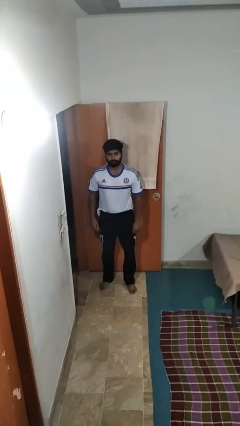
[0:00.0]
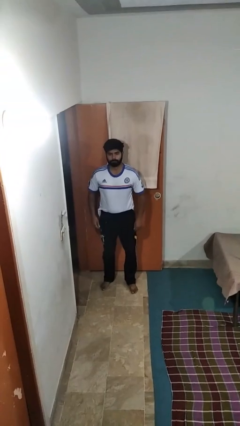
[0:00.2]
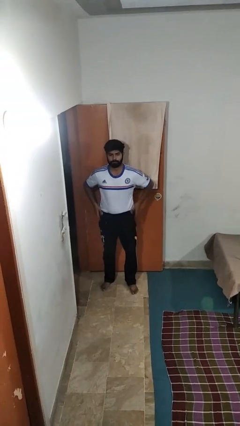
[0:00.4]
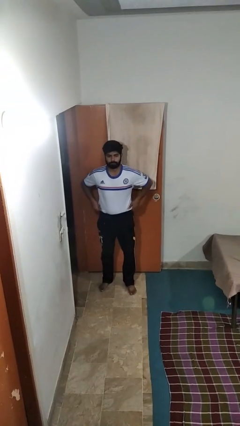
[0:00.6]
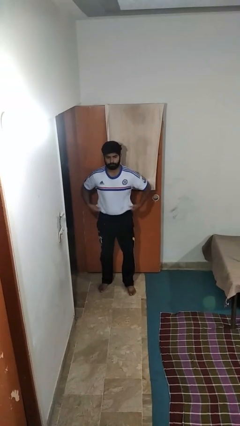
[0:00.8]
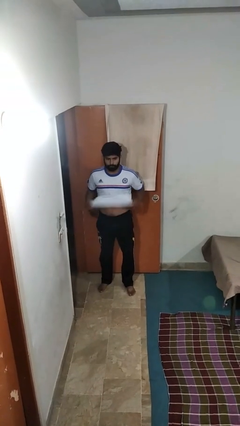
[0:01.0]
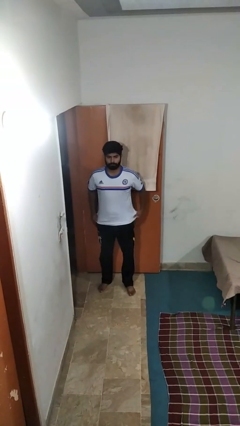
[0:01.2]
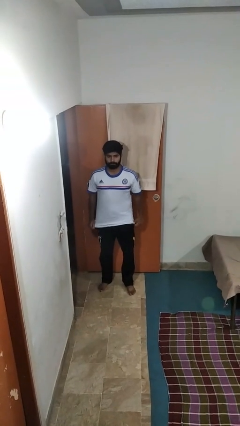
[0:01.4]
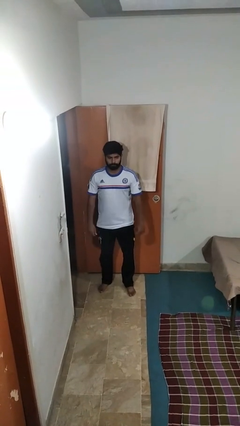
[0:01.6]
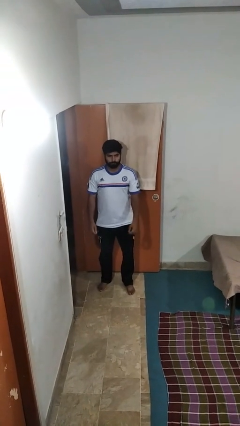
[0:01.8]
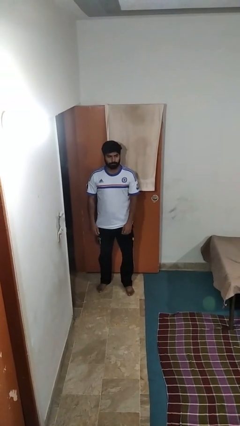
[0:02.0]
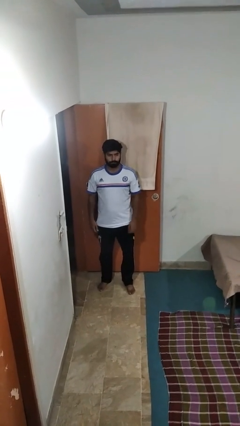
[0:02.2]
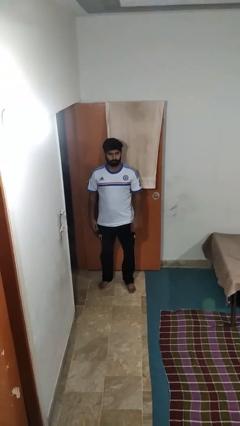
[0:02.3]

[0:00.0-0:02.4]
person untucks shirt

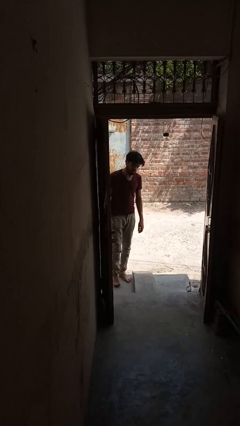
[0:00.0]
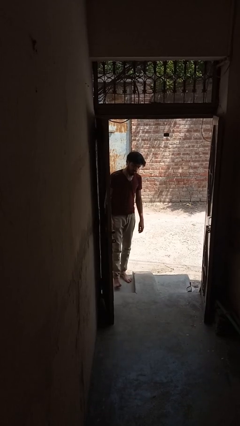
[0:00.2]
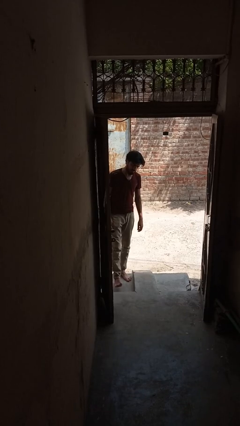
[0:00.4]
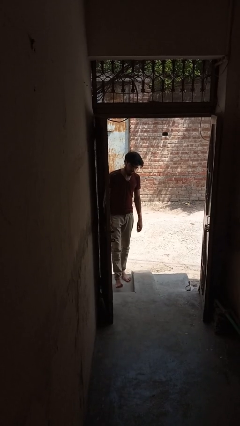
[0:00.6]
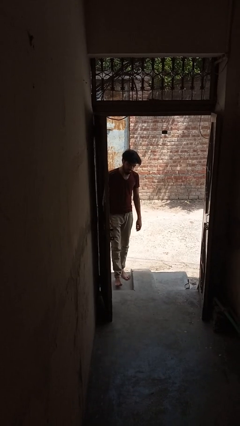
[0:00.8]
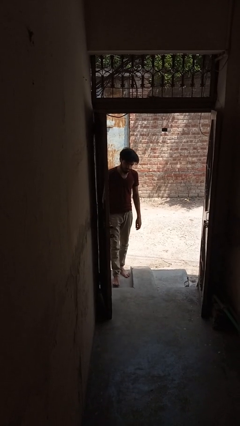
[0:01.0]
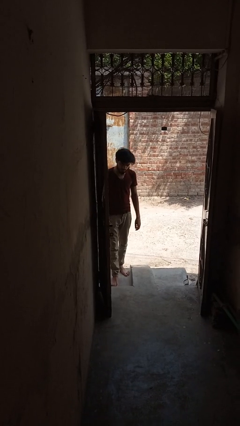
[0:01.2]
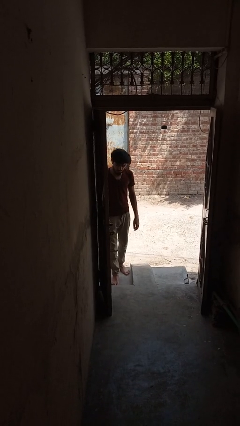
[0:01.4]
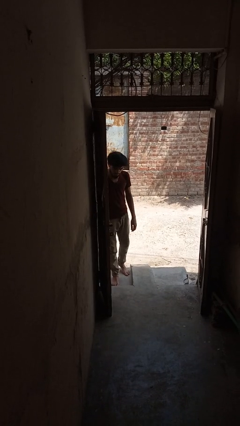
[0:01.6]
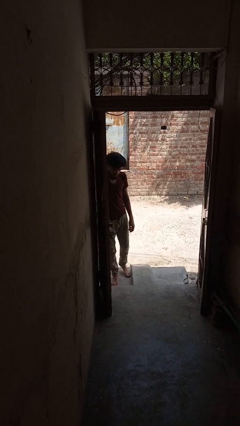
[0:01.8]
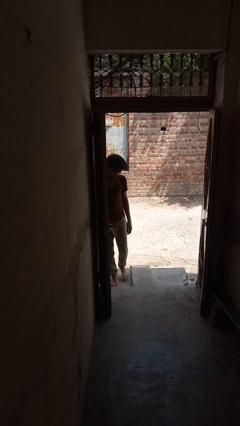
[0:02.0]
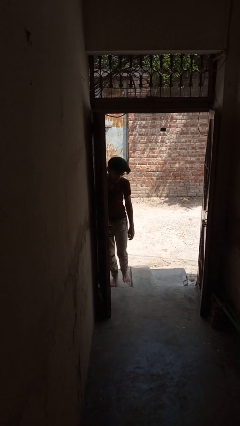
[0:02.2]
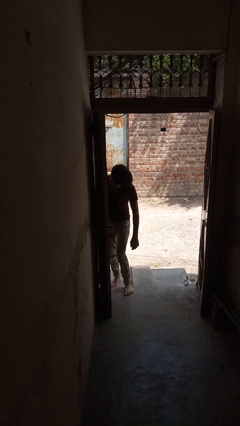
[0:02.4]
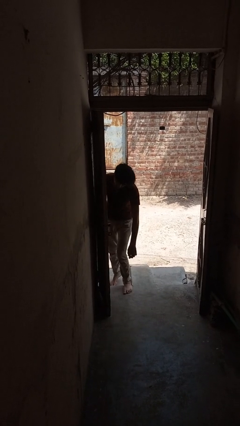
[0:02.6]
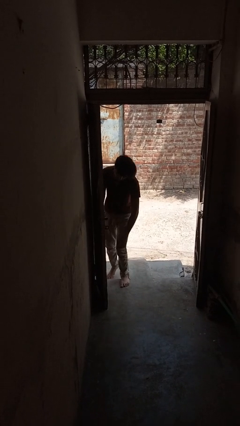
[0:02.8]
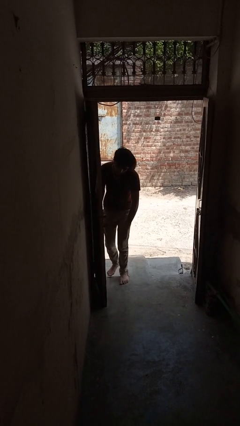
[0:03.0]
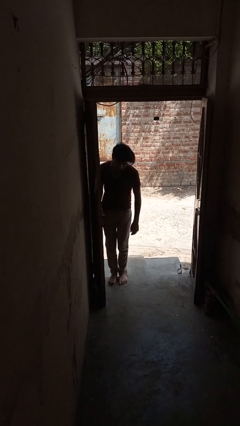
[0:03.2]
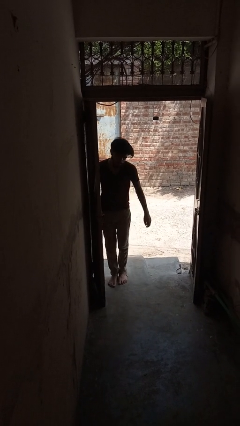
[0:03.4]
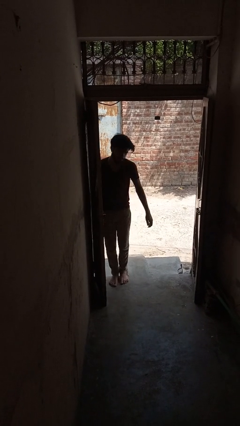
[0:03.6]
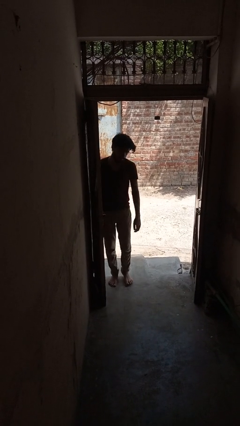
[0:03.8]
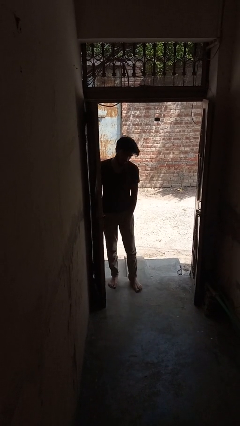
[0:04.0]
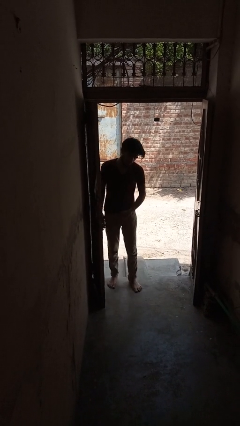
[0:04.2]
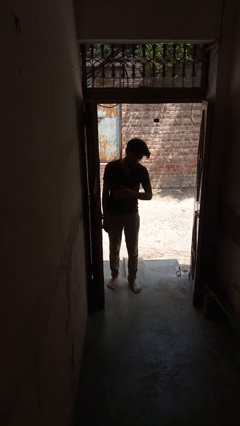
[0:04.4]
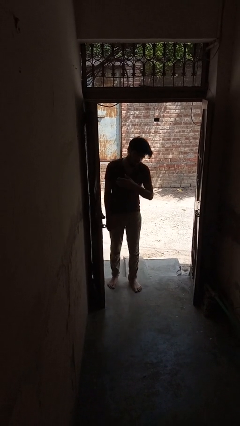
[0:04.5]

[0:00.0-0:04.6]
person bumps into wall

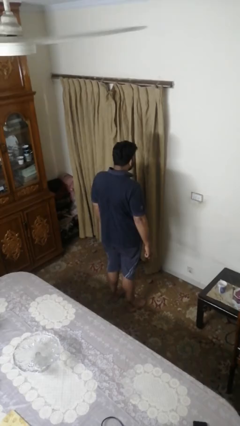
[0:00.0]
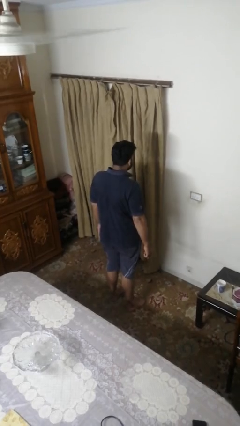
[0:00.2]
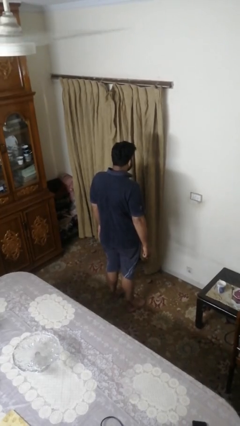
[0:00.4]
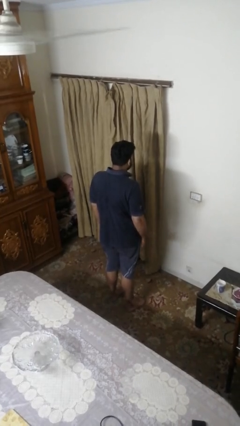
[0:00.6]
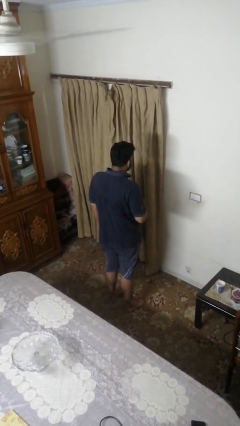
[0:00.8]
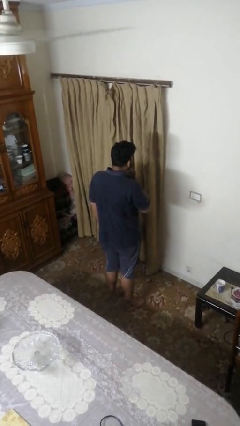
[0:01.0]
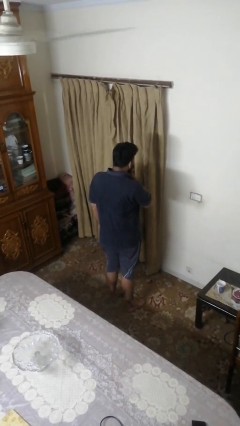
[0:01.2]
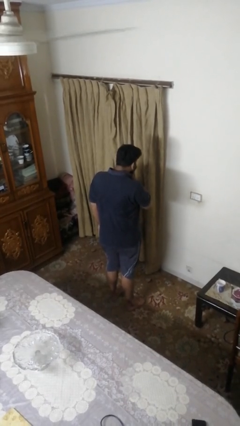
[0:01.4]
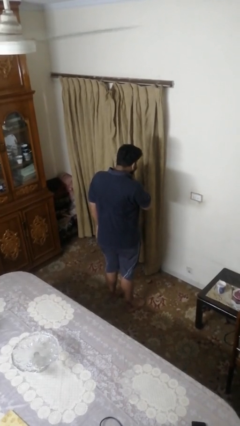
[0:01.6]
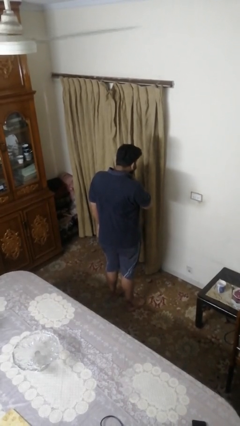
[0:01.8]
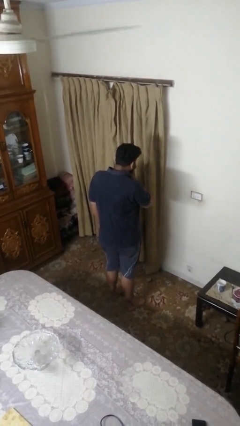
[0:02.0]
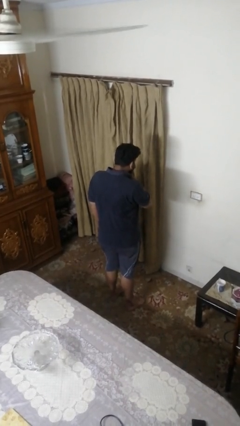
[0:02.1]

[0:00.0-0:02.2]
person strokes chin

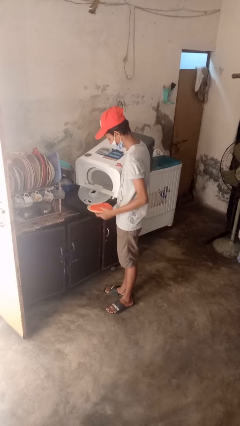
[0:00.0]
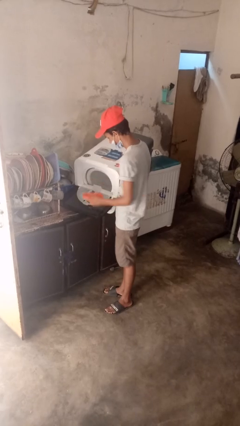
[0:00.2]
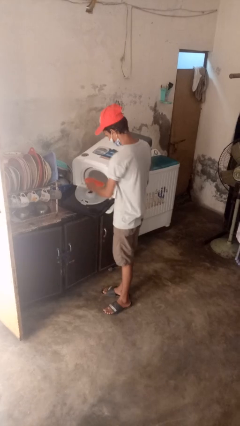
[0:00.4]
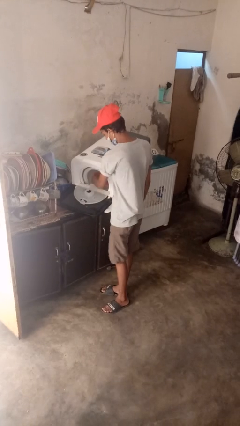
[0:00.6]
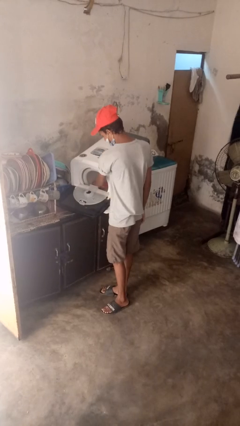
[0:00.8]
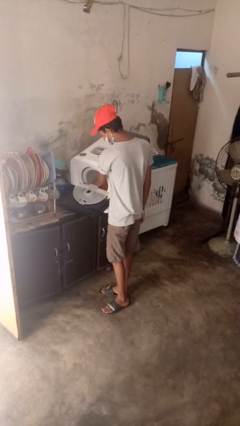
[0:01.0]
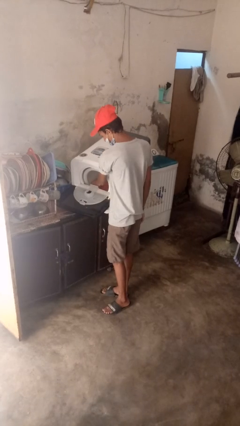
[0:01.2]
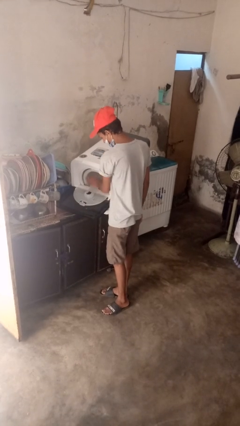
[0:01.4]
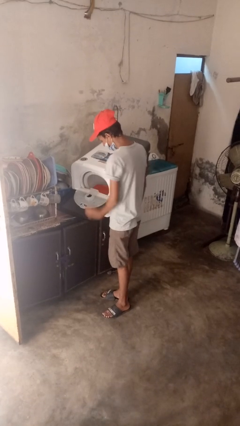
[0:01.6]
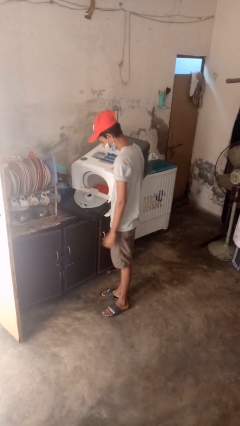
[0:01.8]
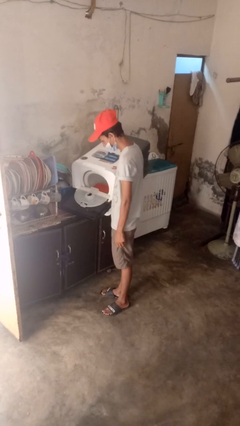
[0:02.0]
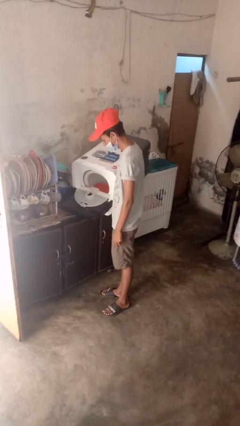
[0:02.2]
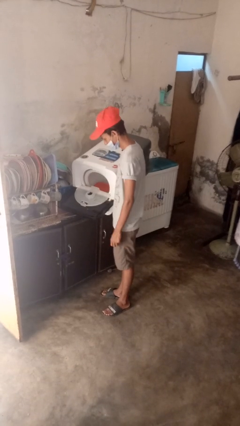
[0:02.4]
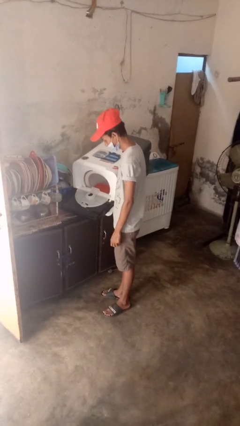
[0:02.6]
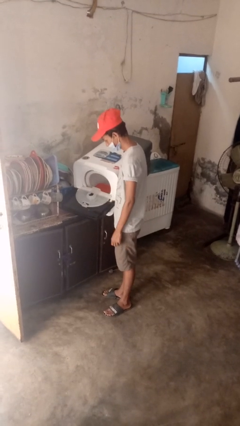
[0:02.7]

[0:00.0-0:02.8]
person loads dishwasher

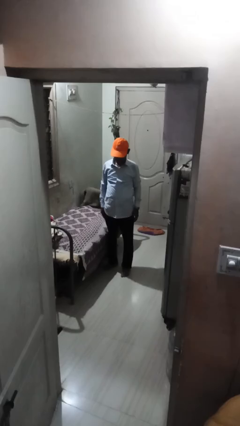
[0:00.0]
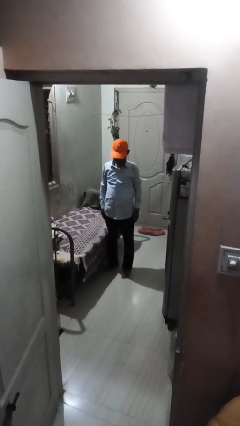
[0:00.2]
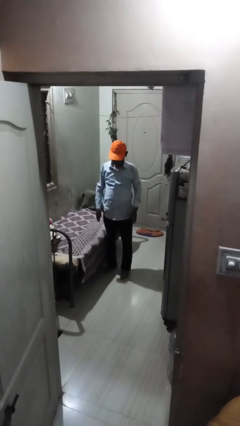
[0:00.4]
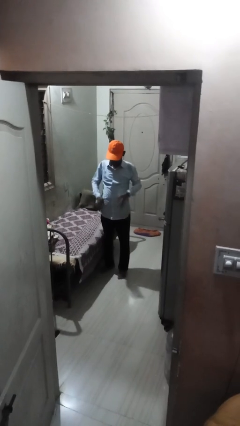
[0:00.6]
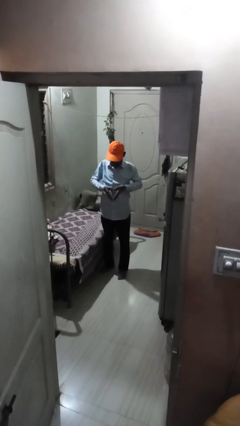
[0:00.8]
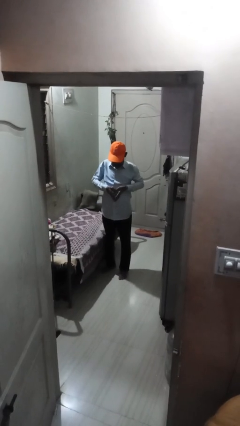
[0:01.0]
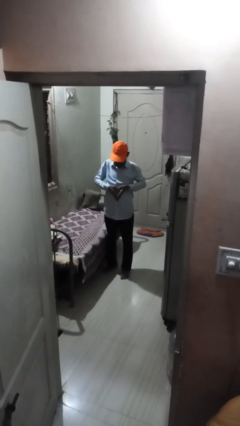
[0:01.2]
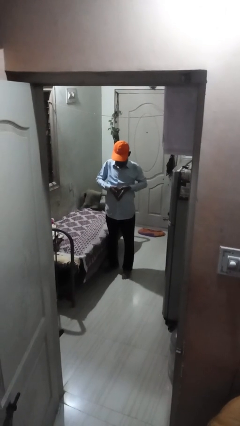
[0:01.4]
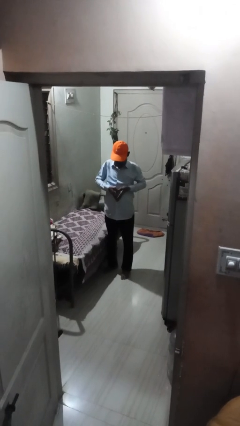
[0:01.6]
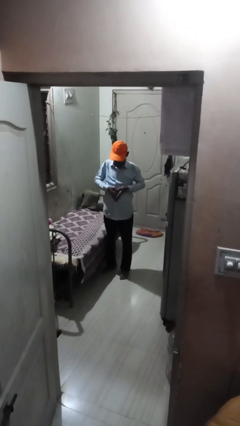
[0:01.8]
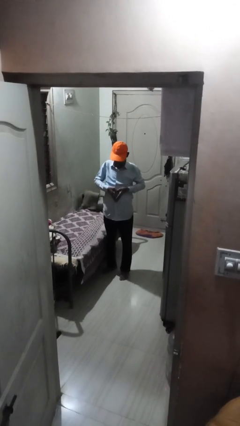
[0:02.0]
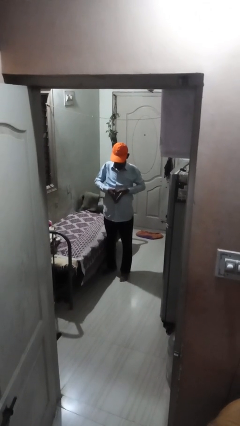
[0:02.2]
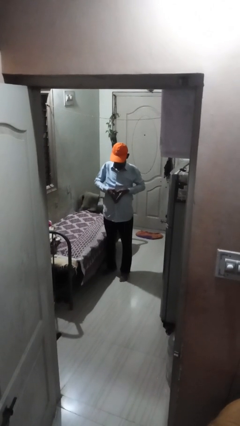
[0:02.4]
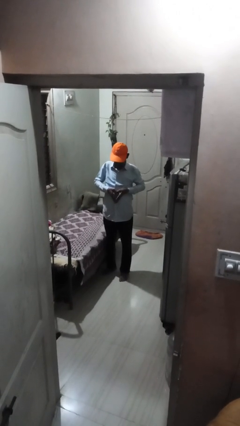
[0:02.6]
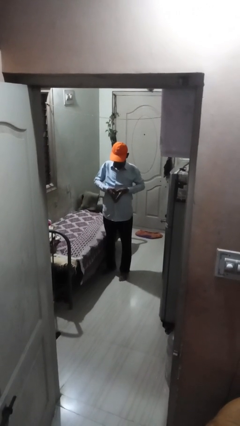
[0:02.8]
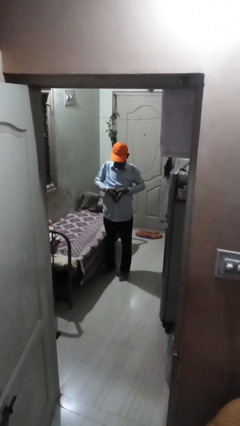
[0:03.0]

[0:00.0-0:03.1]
person gestures heart

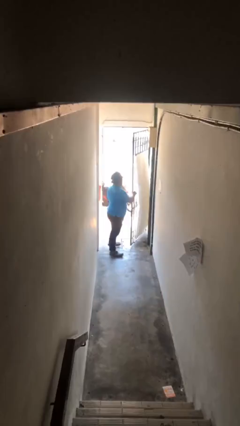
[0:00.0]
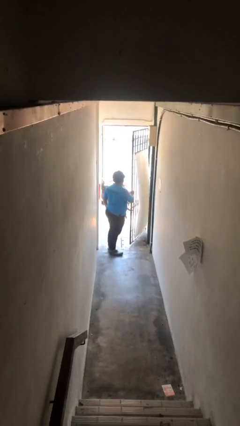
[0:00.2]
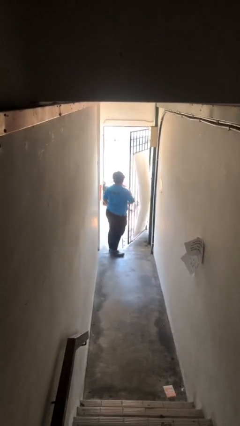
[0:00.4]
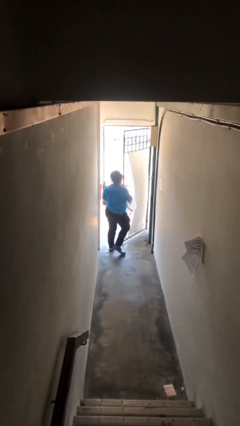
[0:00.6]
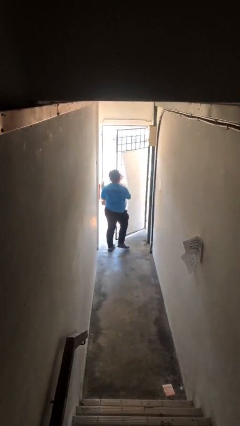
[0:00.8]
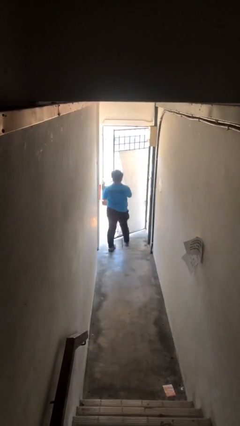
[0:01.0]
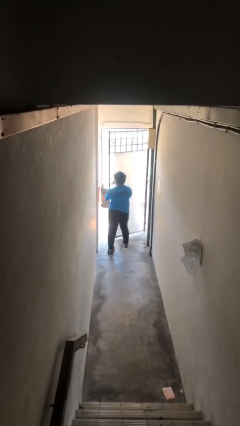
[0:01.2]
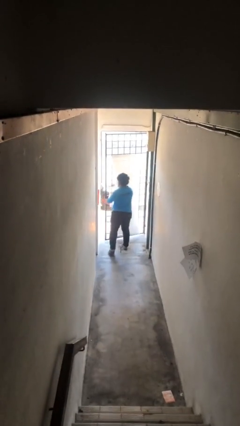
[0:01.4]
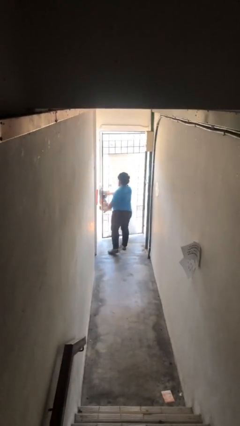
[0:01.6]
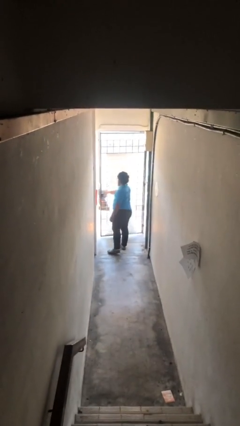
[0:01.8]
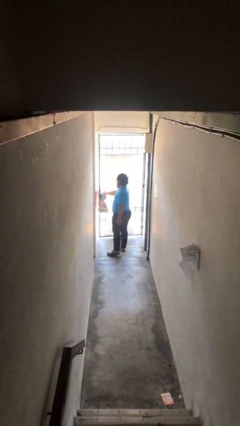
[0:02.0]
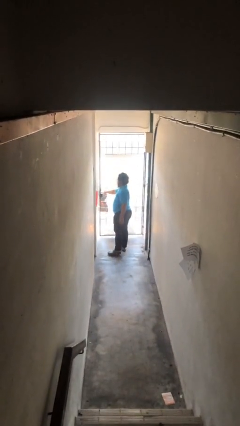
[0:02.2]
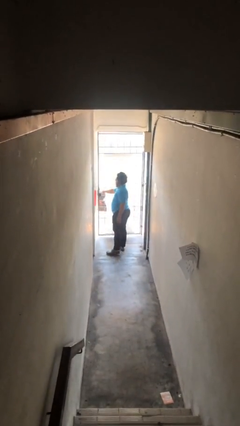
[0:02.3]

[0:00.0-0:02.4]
person closes facility door
